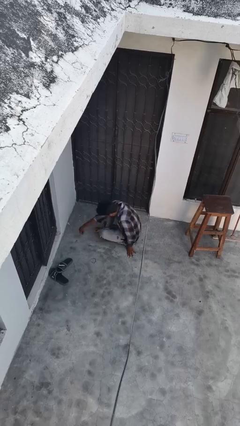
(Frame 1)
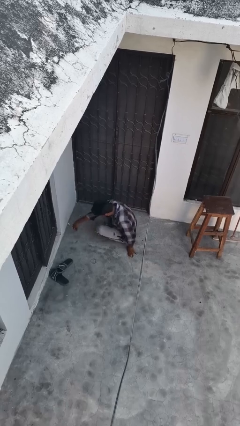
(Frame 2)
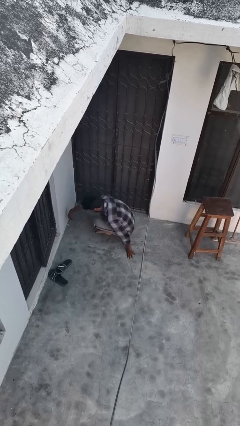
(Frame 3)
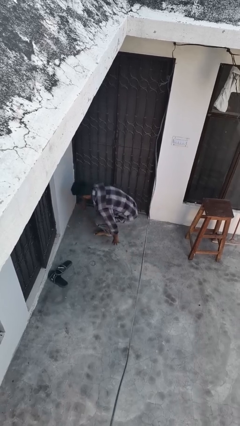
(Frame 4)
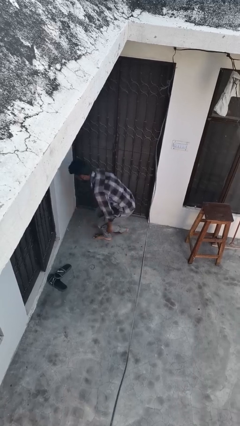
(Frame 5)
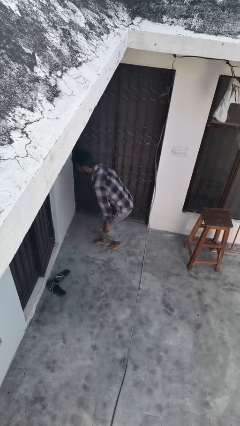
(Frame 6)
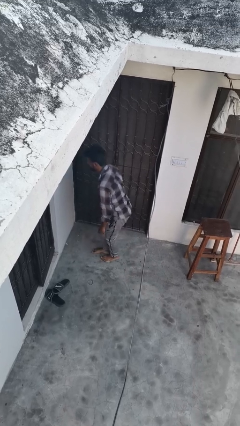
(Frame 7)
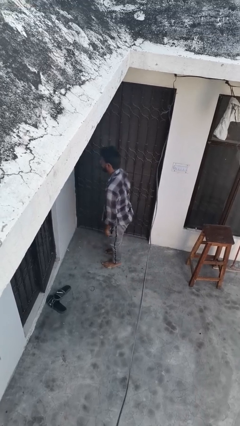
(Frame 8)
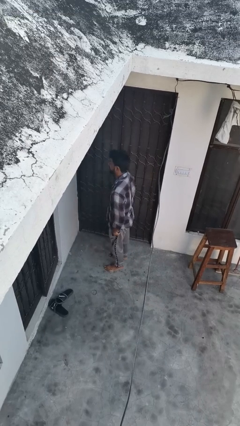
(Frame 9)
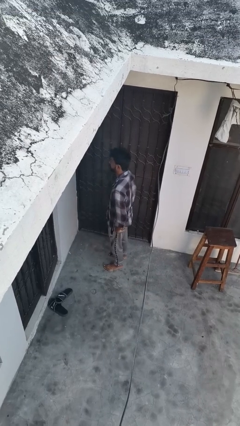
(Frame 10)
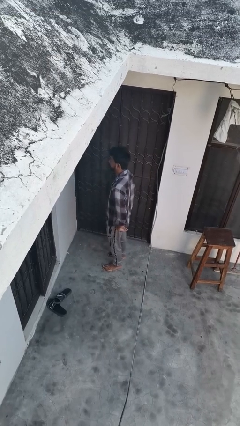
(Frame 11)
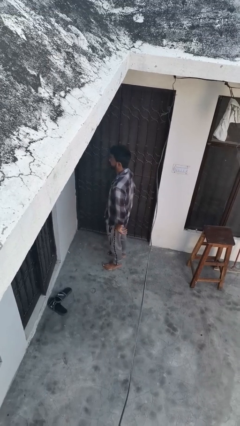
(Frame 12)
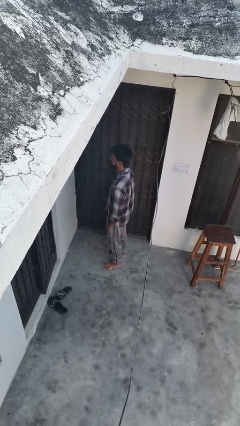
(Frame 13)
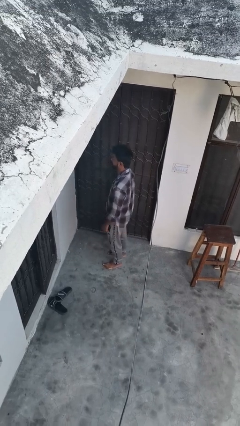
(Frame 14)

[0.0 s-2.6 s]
person stands up from floor

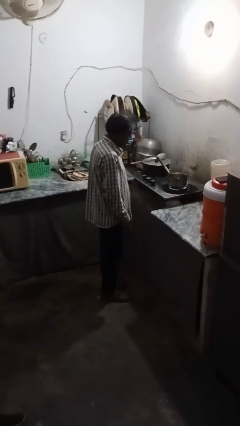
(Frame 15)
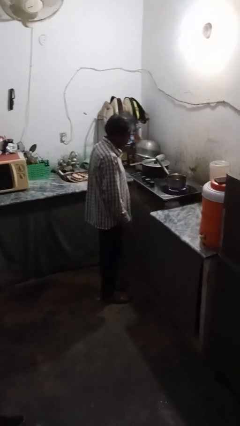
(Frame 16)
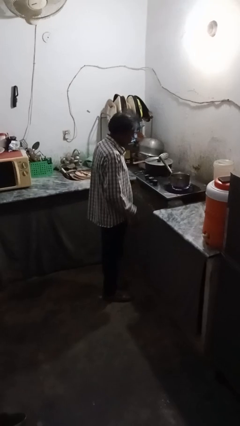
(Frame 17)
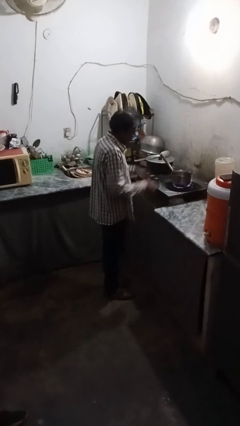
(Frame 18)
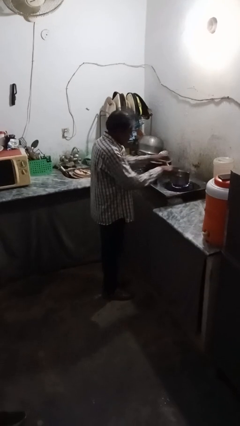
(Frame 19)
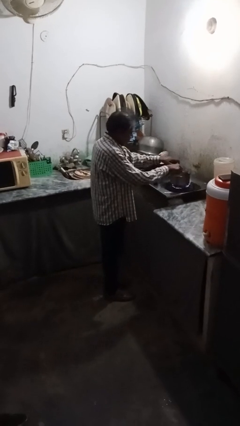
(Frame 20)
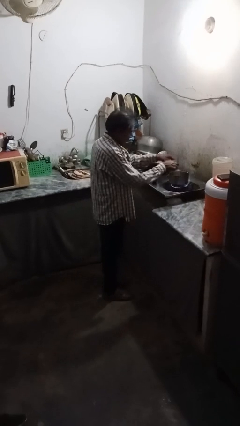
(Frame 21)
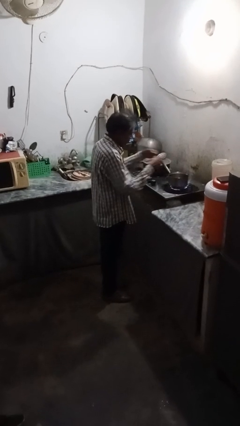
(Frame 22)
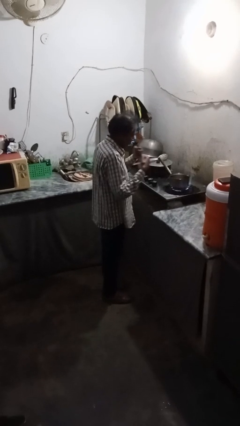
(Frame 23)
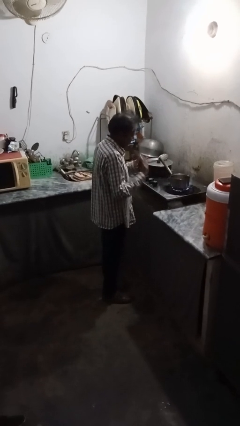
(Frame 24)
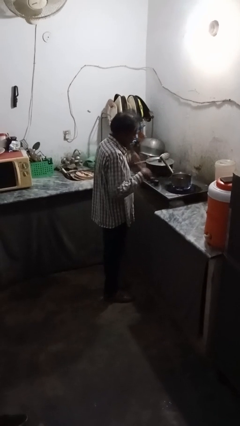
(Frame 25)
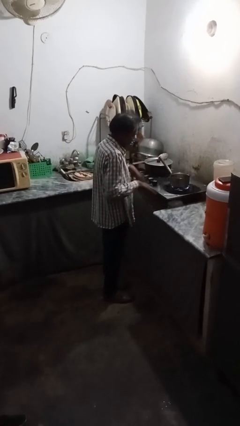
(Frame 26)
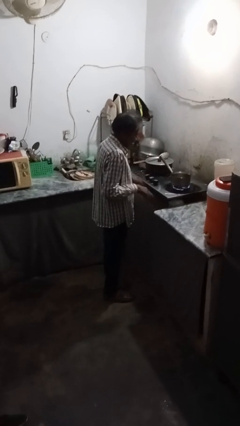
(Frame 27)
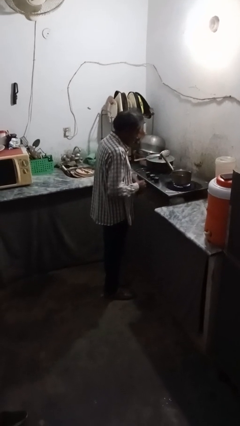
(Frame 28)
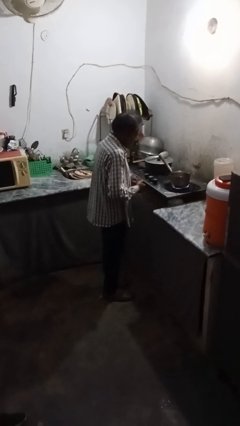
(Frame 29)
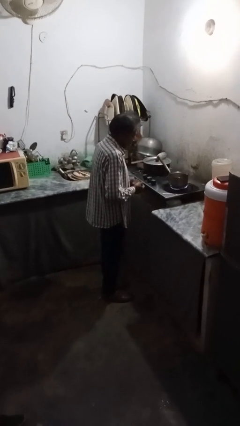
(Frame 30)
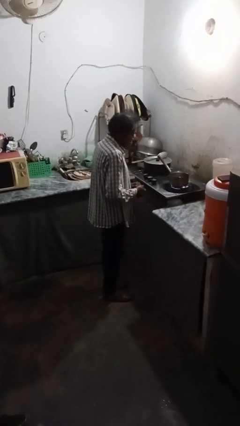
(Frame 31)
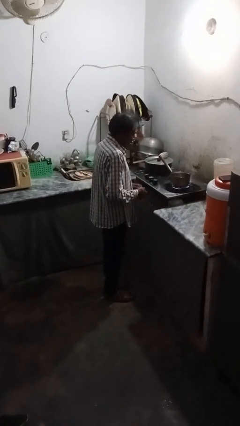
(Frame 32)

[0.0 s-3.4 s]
person burns hand

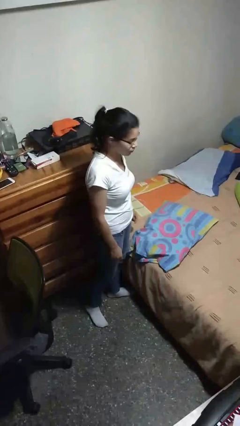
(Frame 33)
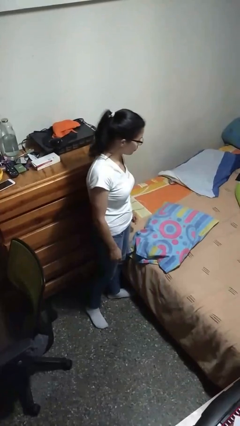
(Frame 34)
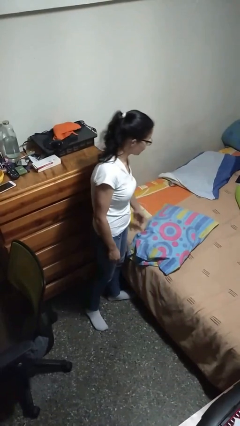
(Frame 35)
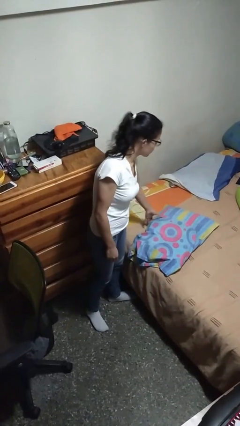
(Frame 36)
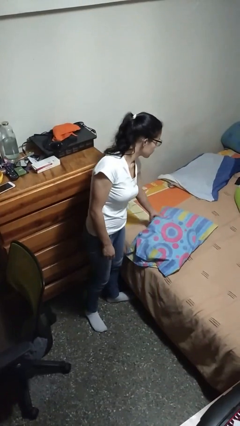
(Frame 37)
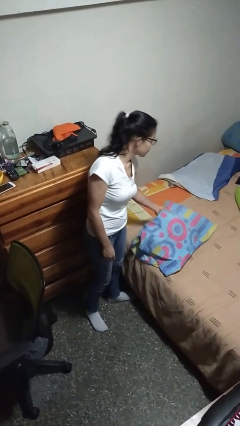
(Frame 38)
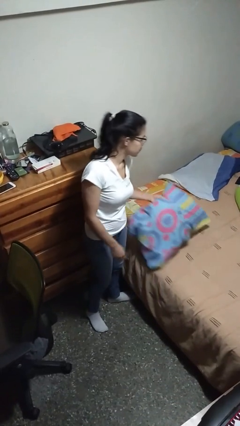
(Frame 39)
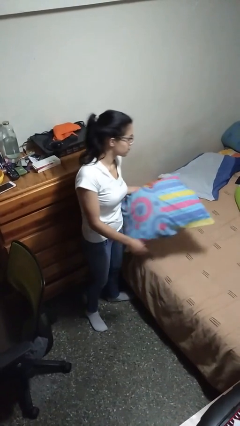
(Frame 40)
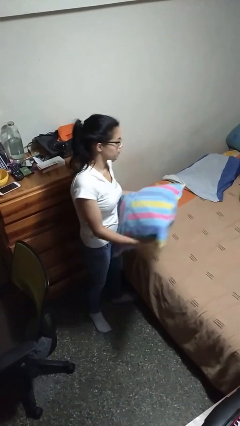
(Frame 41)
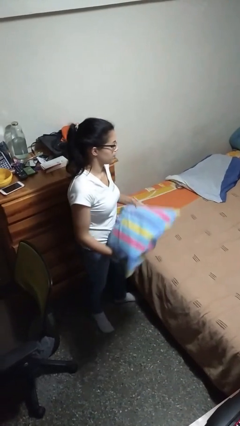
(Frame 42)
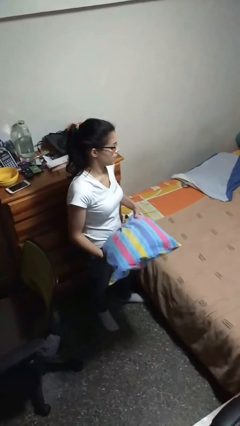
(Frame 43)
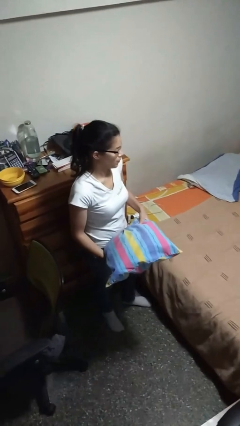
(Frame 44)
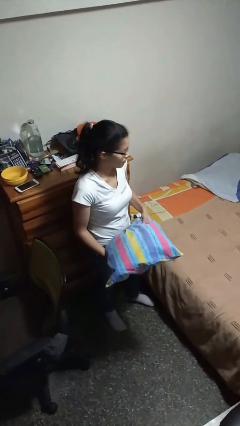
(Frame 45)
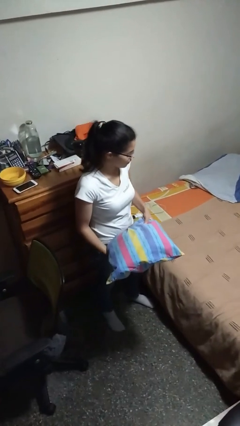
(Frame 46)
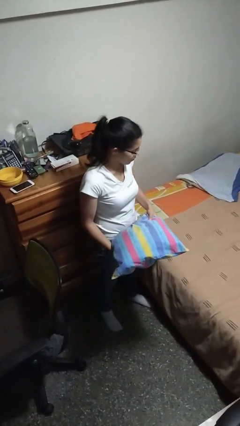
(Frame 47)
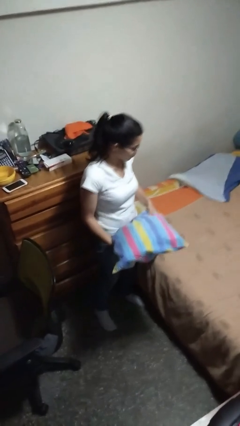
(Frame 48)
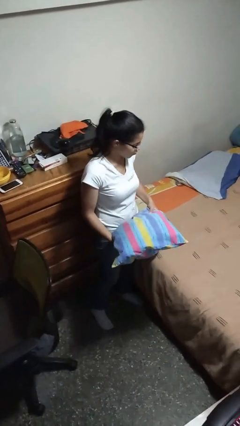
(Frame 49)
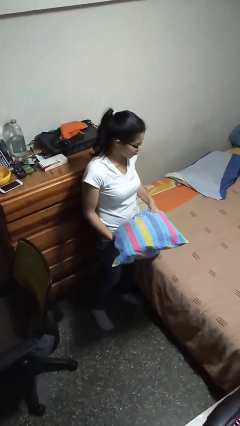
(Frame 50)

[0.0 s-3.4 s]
person picks up object from bed

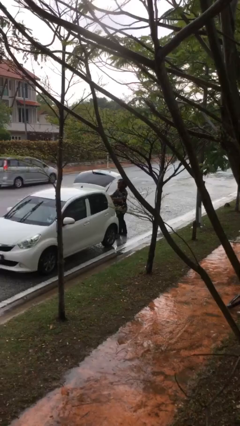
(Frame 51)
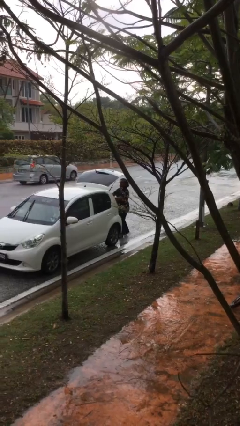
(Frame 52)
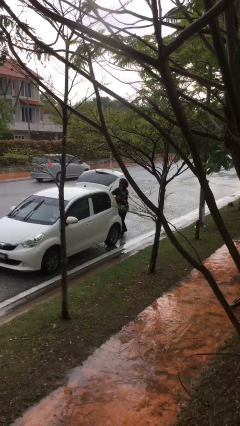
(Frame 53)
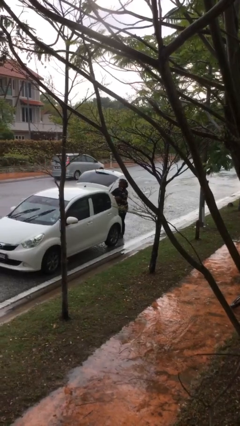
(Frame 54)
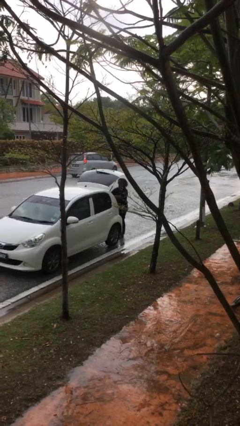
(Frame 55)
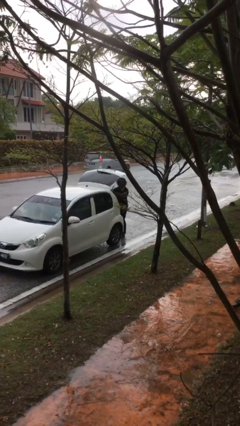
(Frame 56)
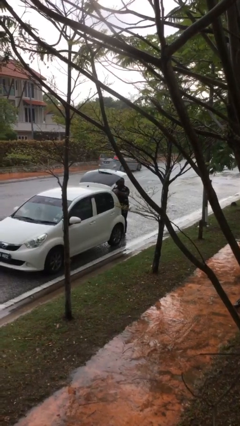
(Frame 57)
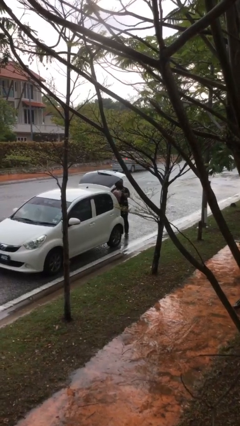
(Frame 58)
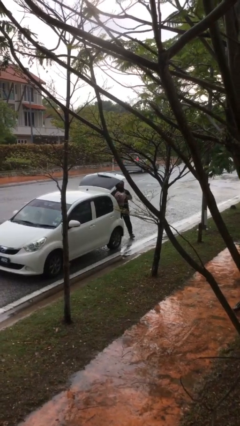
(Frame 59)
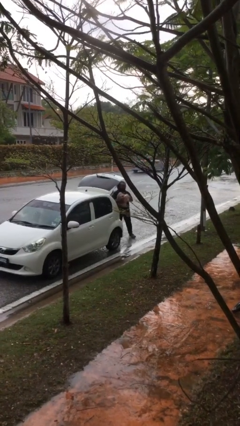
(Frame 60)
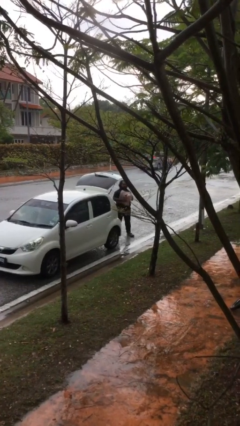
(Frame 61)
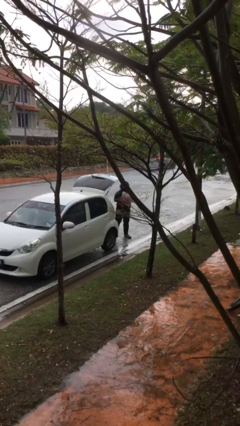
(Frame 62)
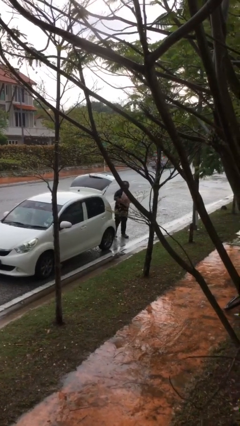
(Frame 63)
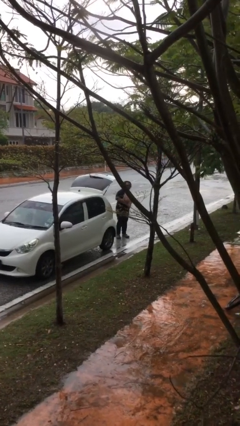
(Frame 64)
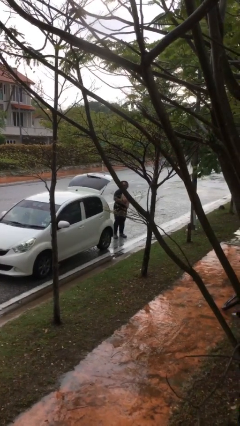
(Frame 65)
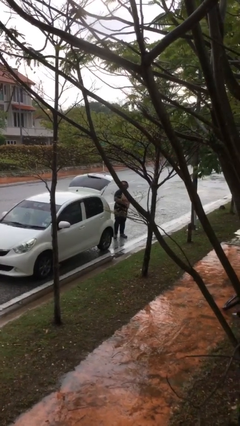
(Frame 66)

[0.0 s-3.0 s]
person unloads car

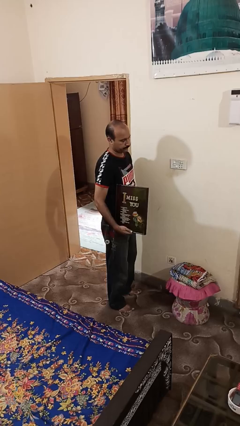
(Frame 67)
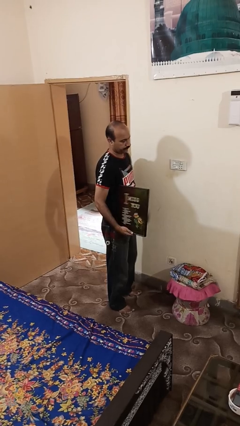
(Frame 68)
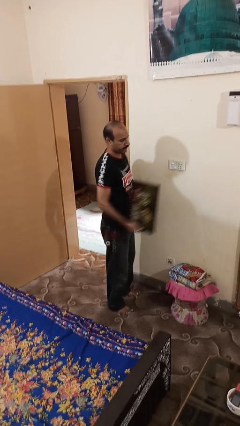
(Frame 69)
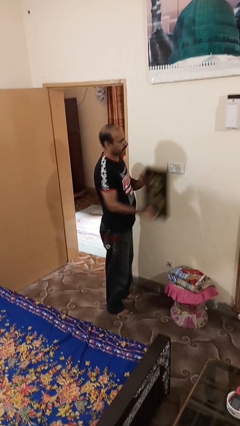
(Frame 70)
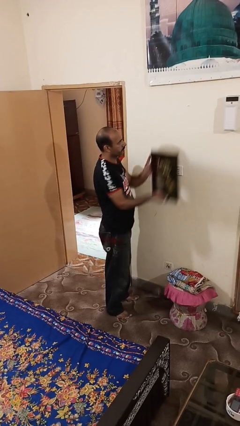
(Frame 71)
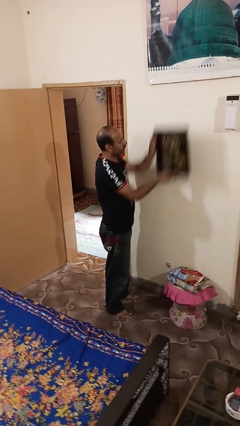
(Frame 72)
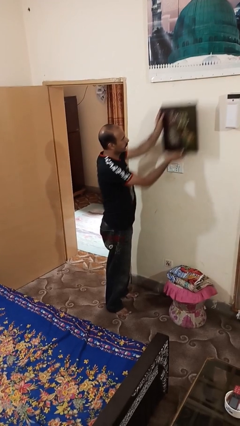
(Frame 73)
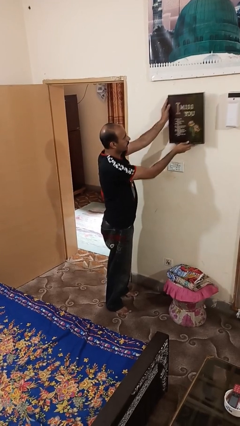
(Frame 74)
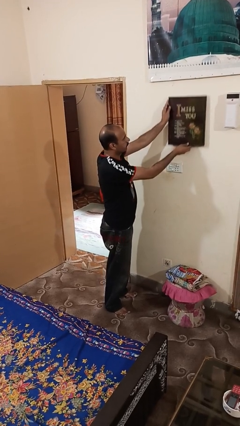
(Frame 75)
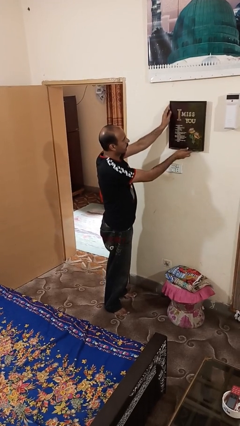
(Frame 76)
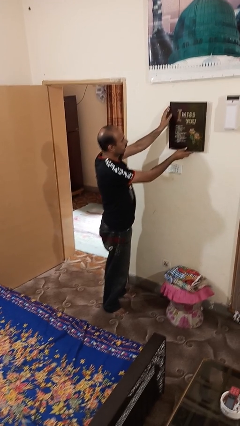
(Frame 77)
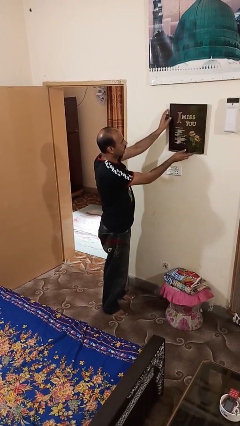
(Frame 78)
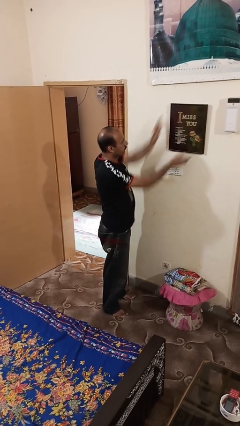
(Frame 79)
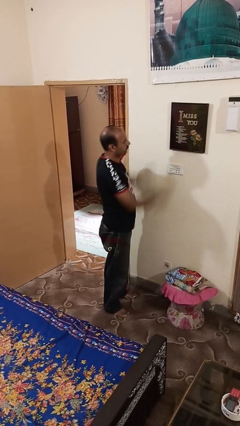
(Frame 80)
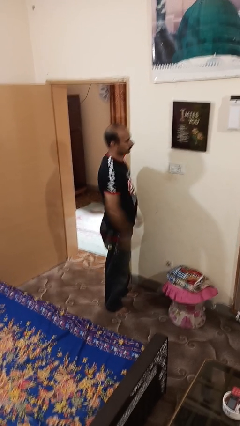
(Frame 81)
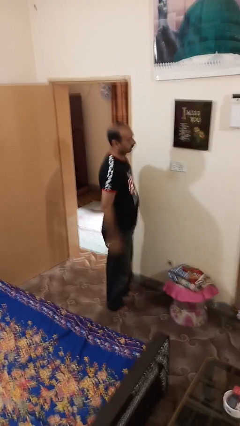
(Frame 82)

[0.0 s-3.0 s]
person puts up picture frame

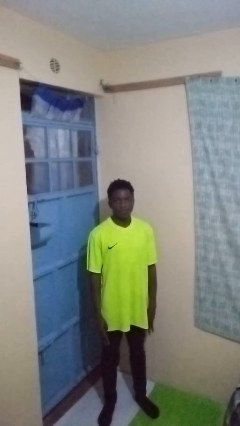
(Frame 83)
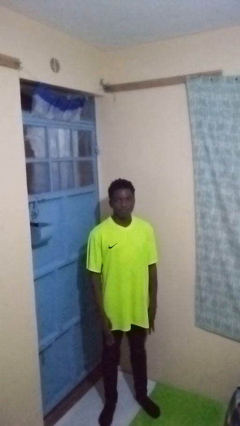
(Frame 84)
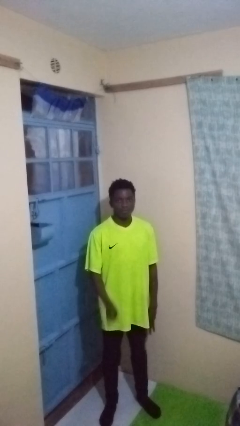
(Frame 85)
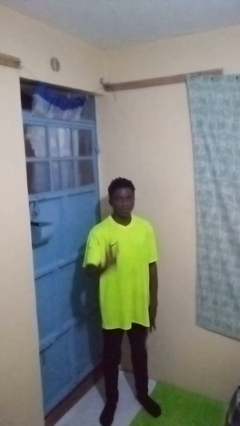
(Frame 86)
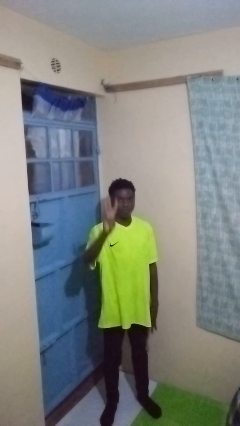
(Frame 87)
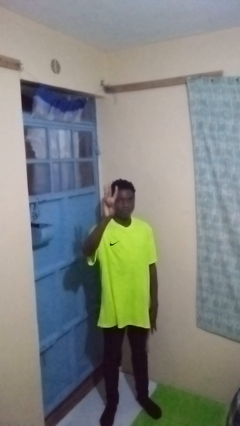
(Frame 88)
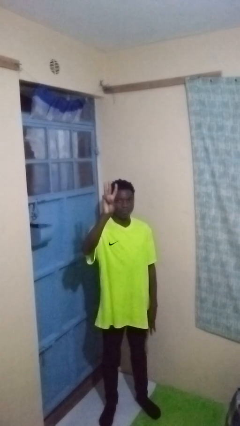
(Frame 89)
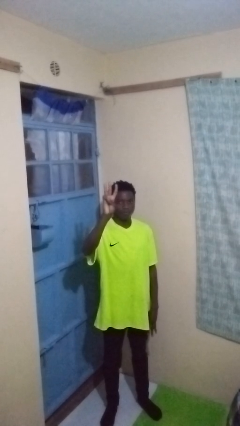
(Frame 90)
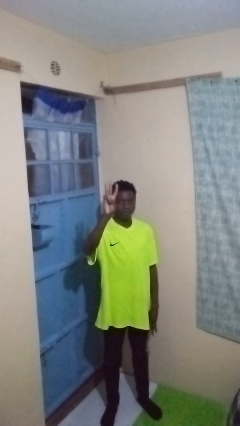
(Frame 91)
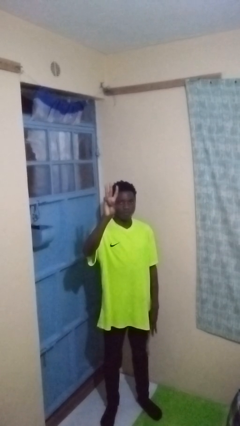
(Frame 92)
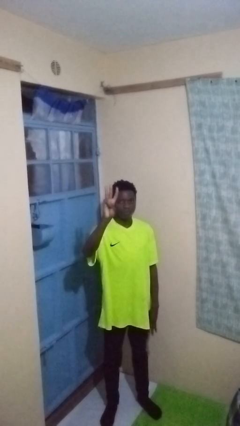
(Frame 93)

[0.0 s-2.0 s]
person gestures number three
